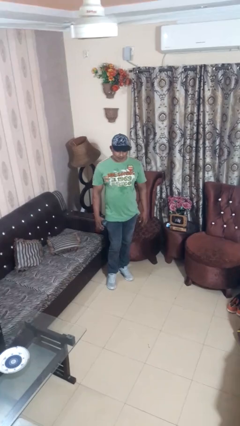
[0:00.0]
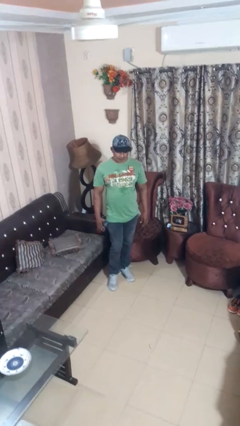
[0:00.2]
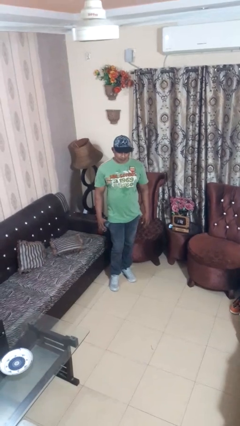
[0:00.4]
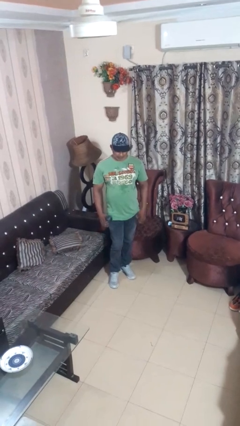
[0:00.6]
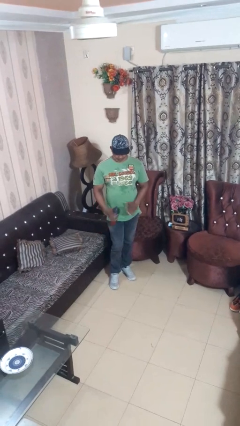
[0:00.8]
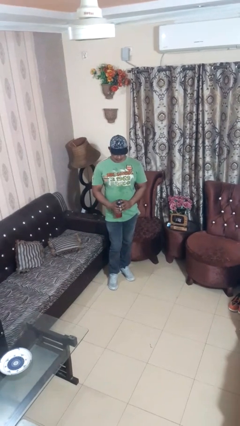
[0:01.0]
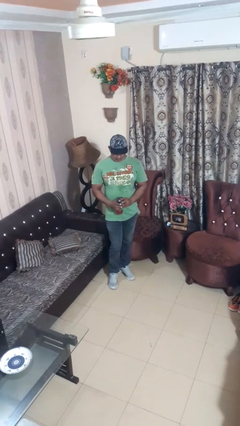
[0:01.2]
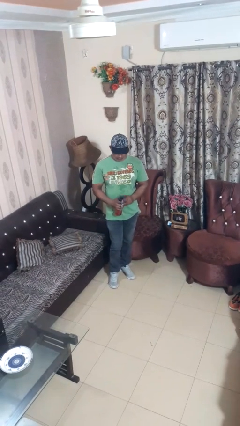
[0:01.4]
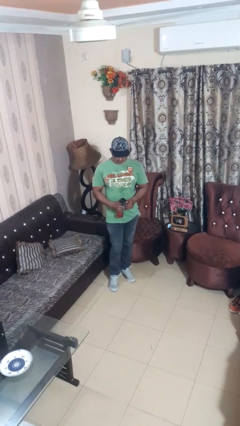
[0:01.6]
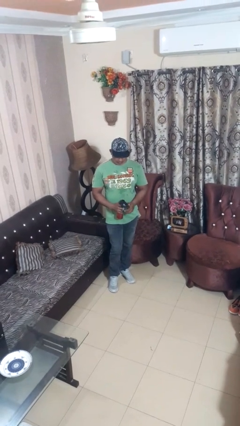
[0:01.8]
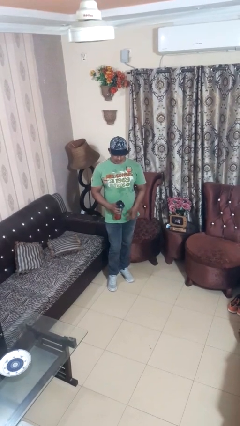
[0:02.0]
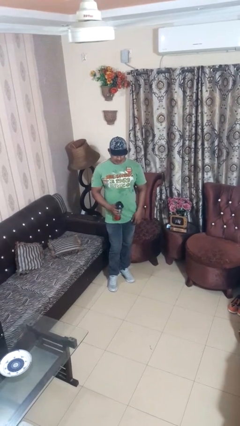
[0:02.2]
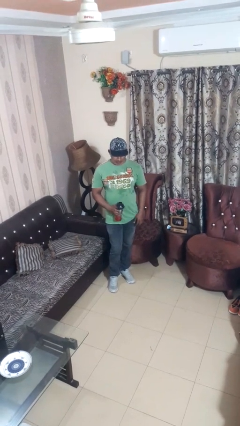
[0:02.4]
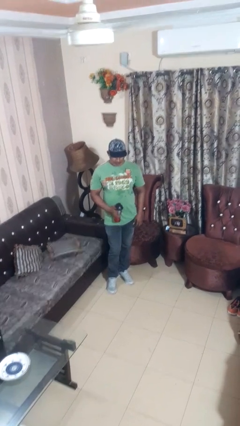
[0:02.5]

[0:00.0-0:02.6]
person opens beverage can

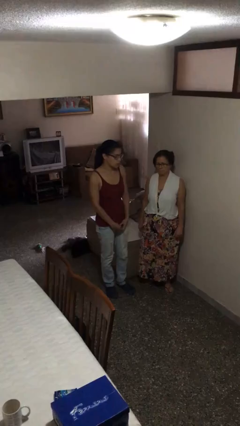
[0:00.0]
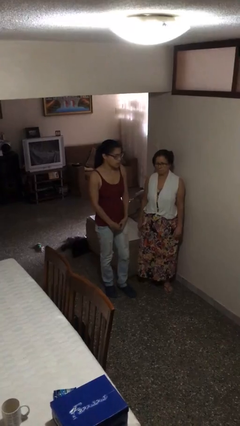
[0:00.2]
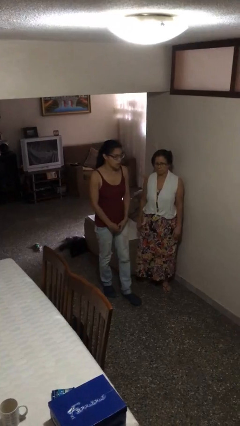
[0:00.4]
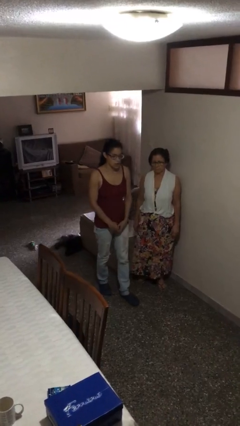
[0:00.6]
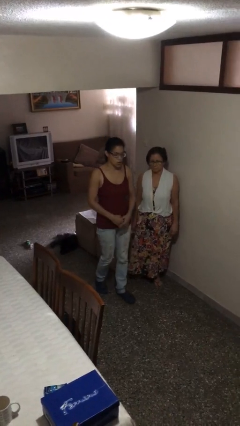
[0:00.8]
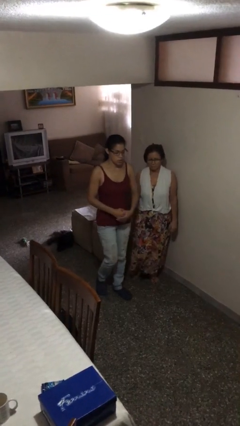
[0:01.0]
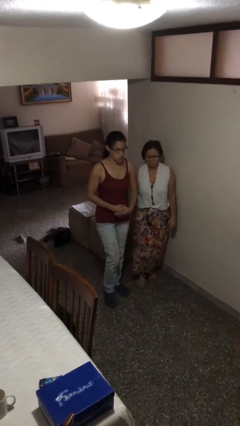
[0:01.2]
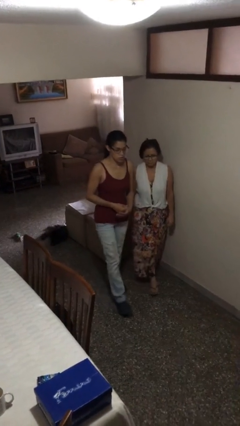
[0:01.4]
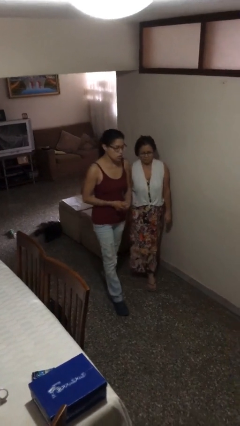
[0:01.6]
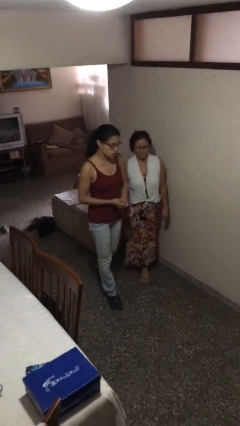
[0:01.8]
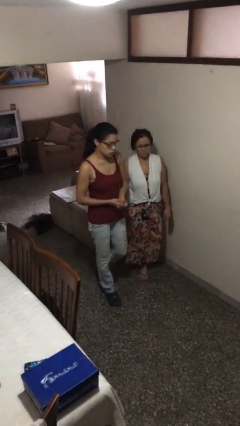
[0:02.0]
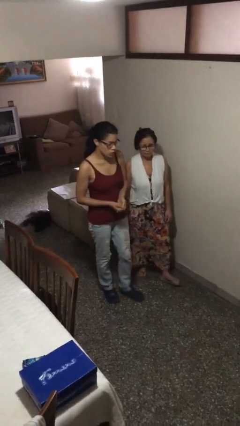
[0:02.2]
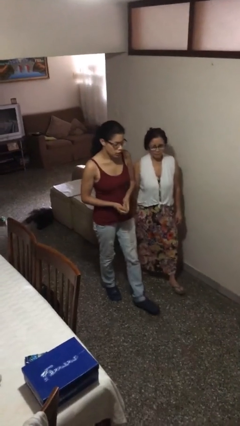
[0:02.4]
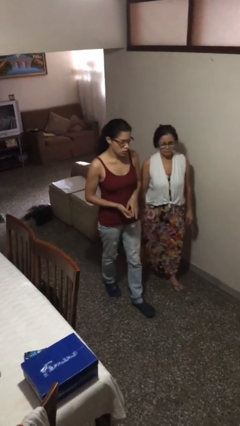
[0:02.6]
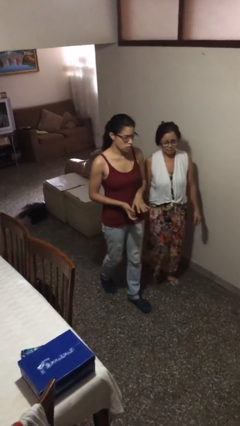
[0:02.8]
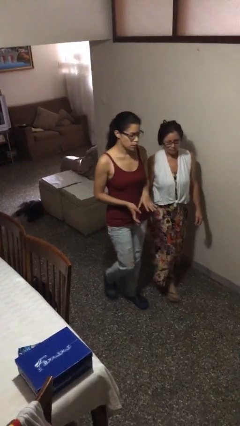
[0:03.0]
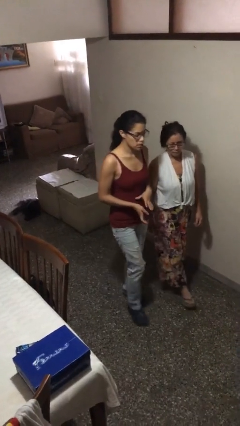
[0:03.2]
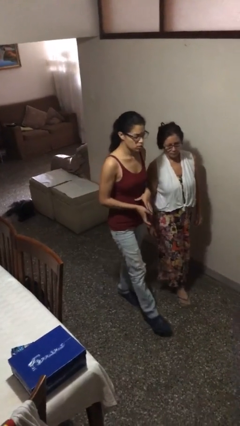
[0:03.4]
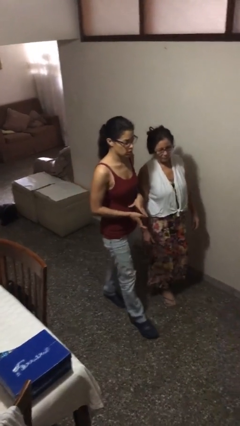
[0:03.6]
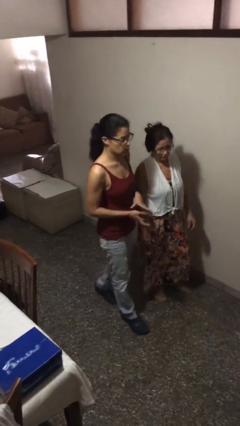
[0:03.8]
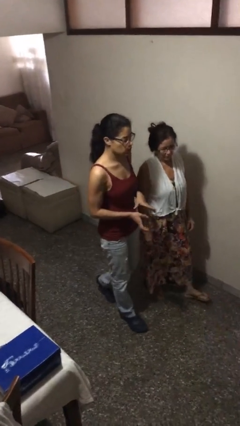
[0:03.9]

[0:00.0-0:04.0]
person talks to person

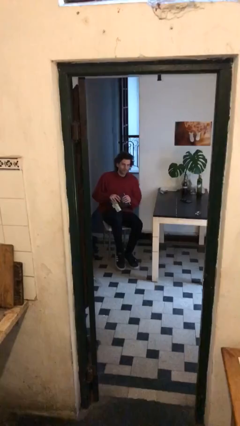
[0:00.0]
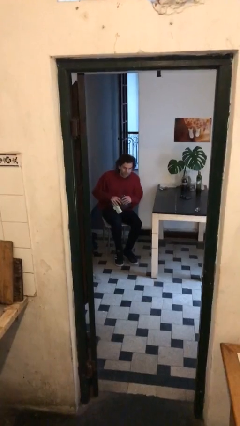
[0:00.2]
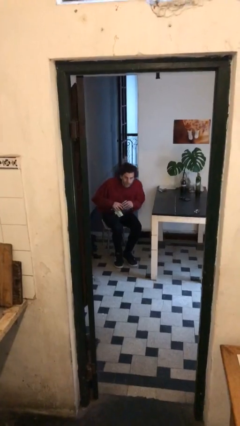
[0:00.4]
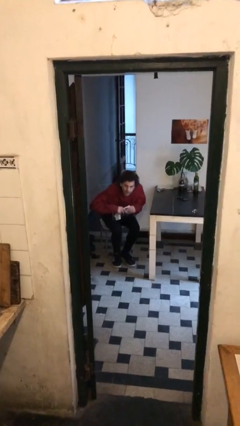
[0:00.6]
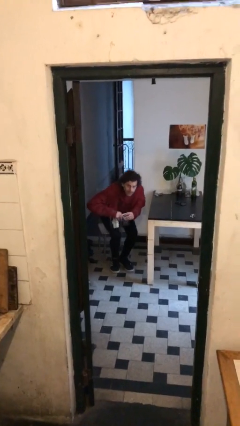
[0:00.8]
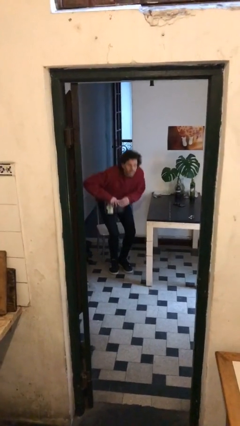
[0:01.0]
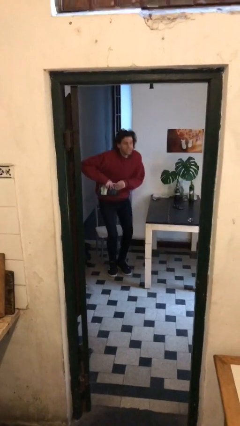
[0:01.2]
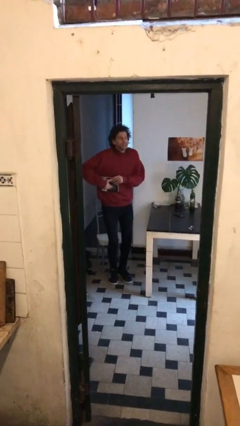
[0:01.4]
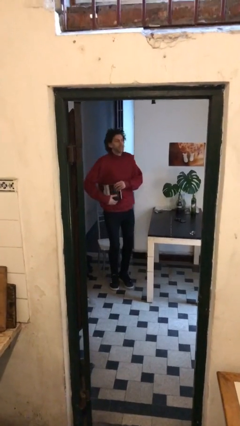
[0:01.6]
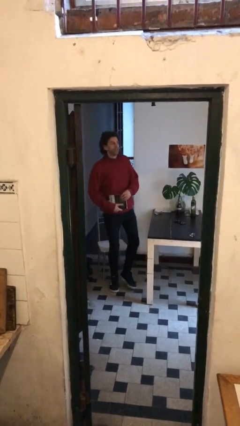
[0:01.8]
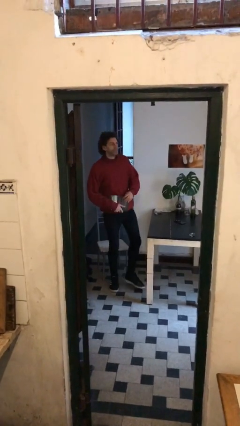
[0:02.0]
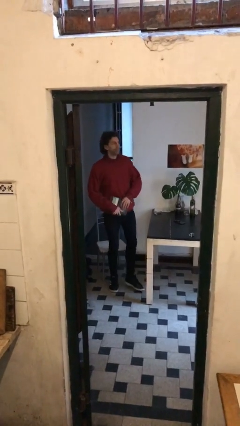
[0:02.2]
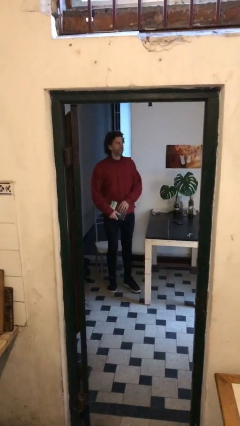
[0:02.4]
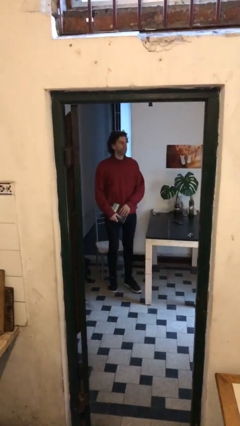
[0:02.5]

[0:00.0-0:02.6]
person stands up

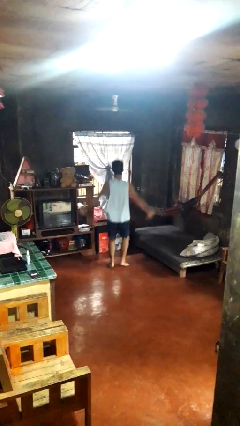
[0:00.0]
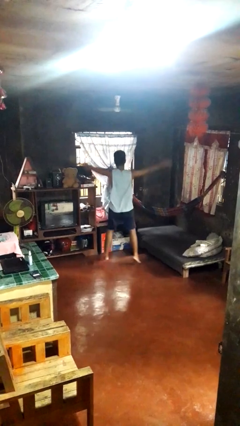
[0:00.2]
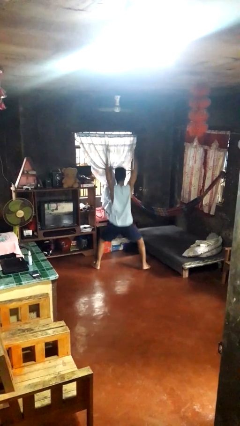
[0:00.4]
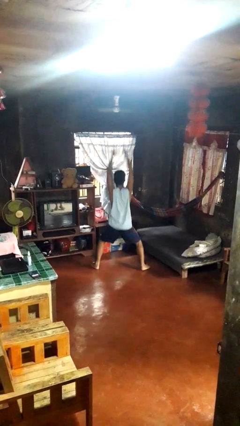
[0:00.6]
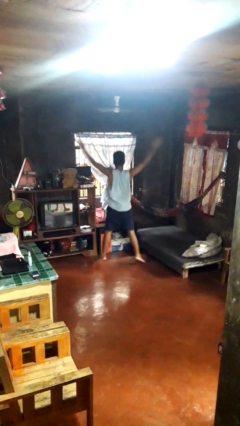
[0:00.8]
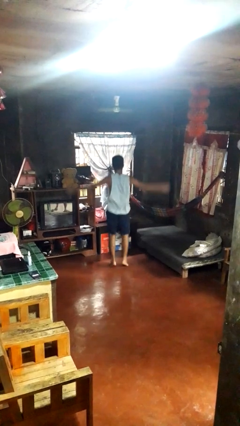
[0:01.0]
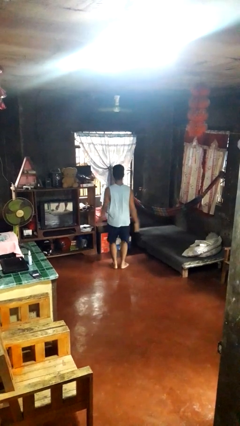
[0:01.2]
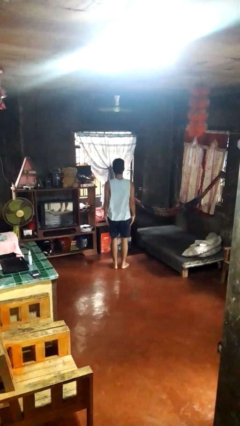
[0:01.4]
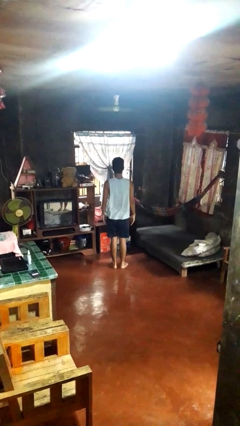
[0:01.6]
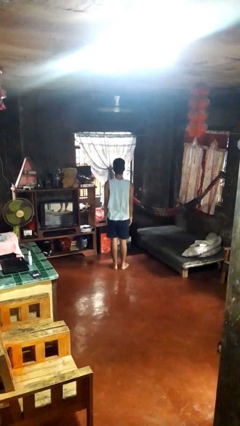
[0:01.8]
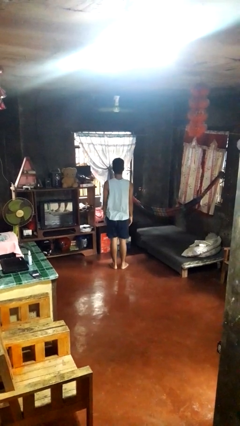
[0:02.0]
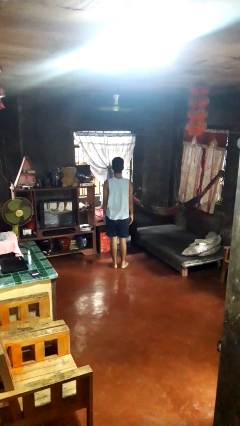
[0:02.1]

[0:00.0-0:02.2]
person exercises with jumping jacks

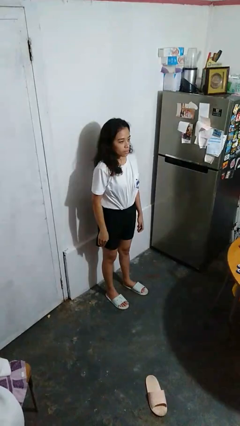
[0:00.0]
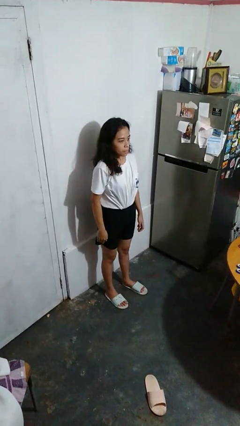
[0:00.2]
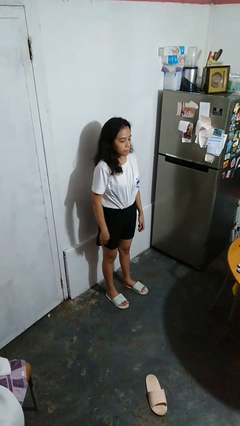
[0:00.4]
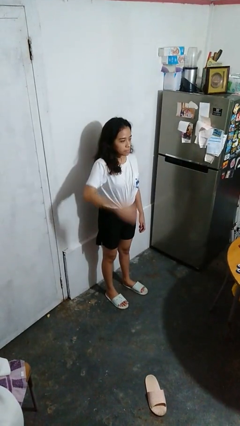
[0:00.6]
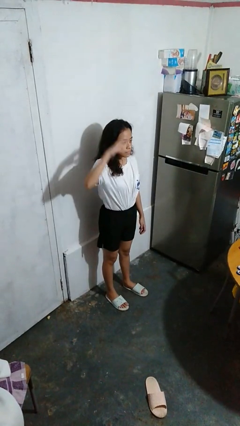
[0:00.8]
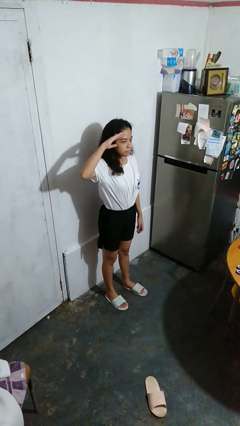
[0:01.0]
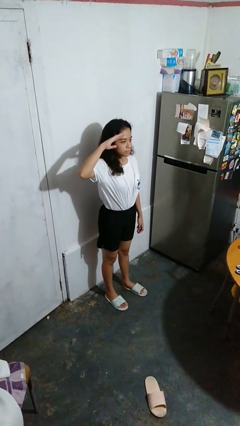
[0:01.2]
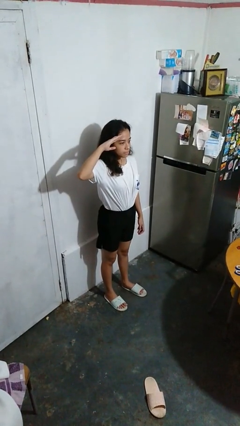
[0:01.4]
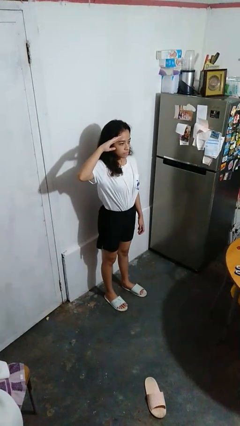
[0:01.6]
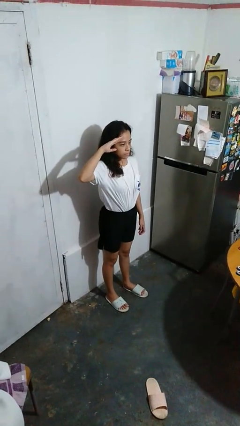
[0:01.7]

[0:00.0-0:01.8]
person salutes

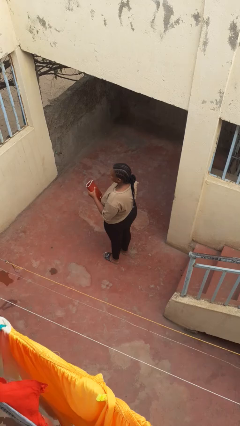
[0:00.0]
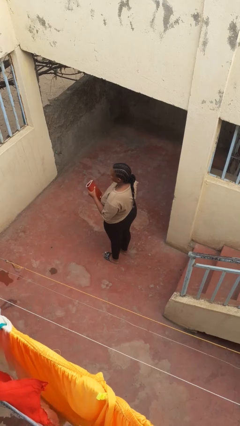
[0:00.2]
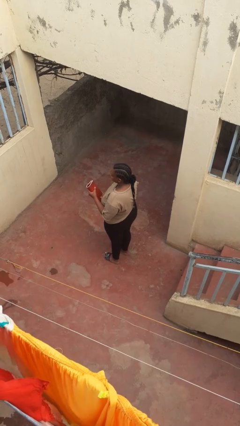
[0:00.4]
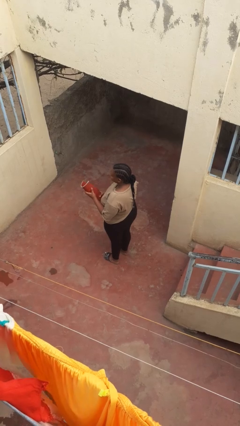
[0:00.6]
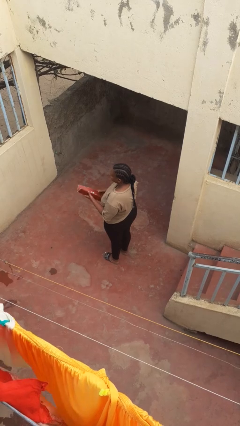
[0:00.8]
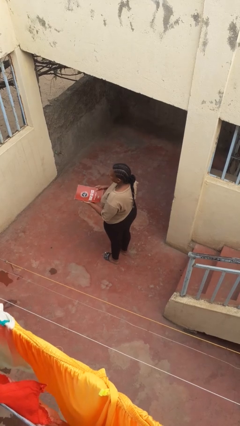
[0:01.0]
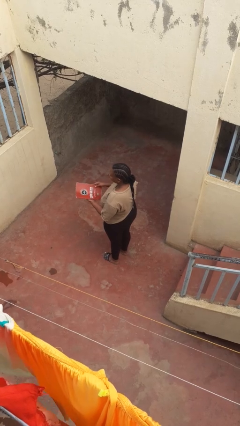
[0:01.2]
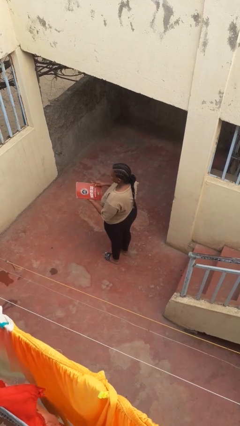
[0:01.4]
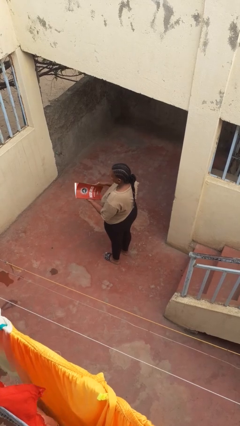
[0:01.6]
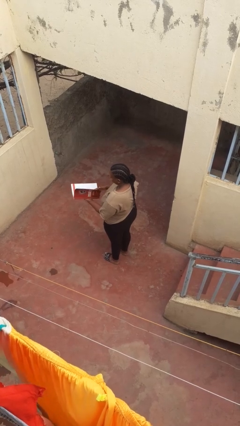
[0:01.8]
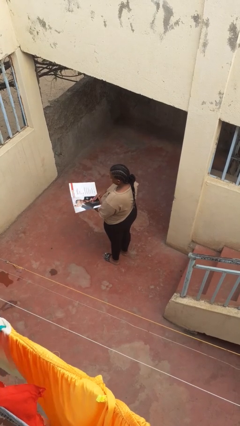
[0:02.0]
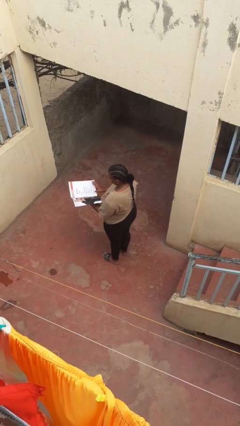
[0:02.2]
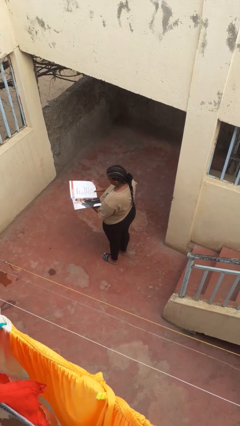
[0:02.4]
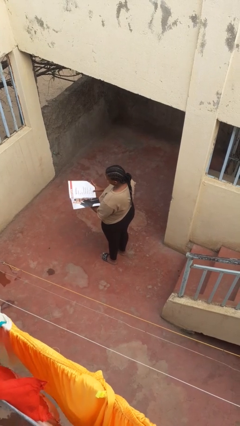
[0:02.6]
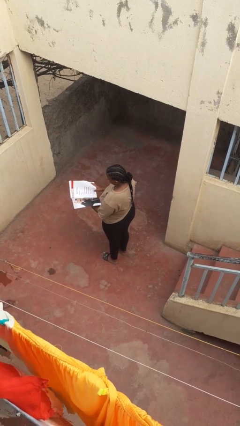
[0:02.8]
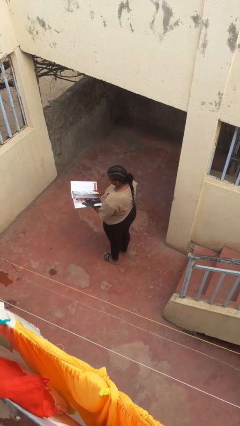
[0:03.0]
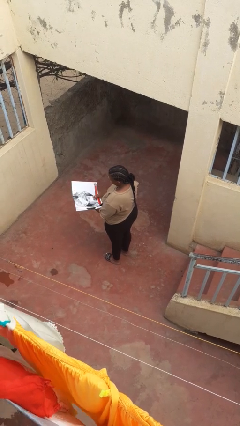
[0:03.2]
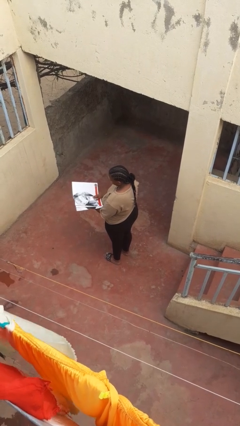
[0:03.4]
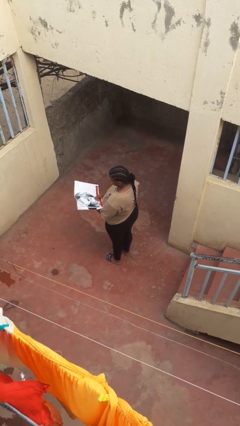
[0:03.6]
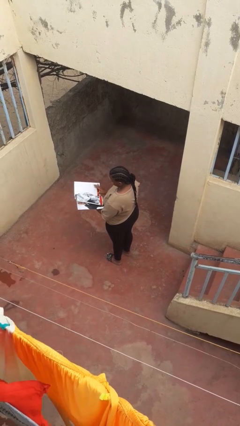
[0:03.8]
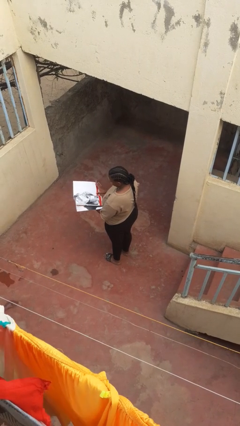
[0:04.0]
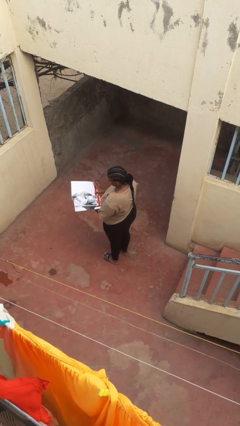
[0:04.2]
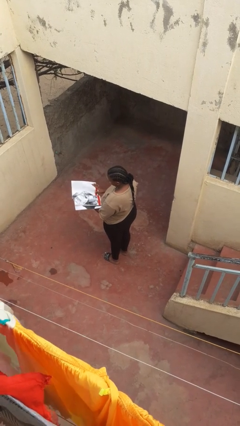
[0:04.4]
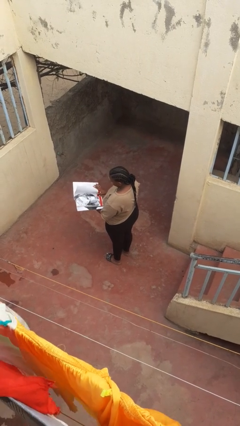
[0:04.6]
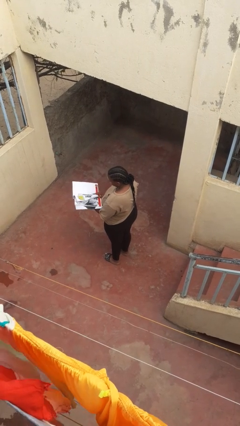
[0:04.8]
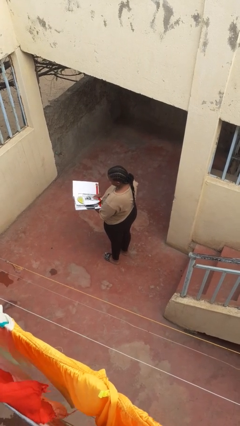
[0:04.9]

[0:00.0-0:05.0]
person reads magazine
